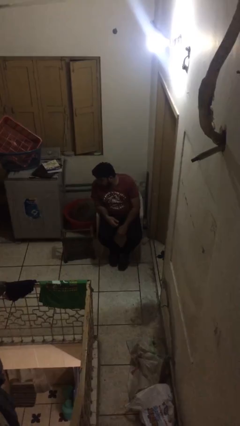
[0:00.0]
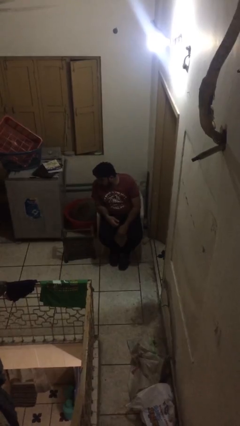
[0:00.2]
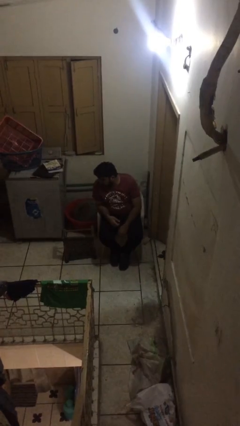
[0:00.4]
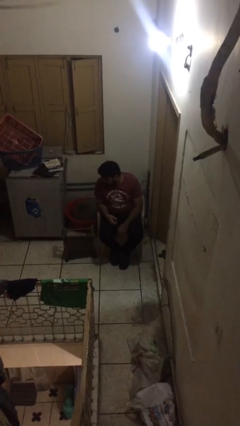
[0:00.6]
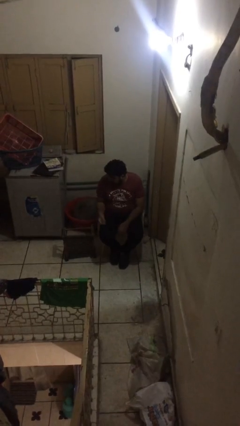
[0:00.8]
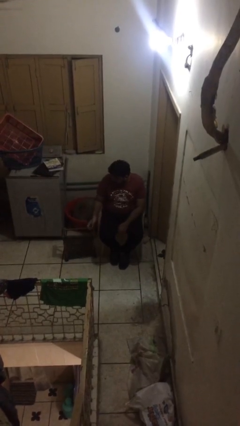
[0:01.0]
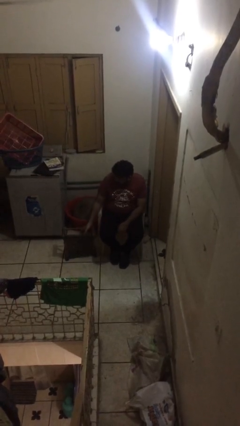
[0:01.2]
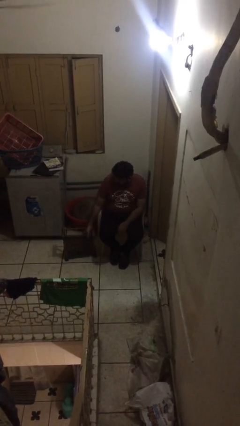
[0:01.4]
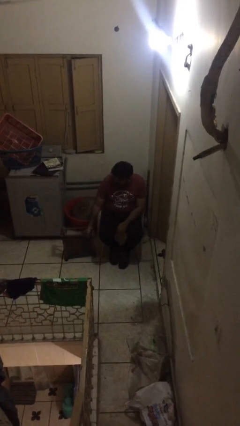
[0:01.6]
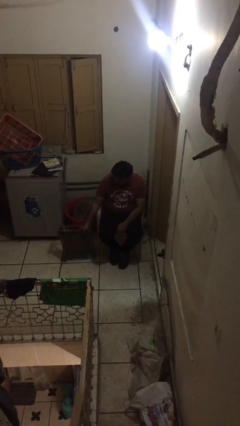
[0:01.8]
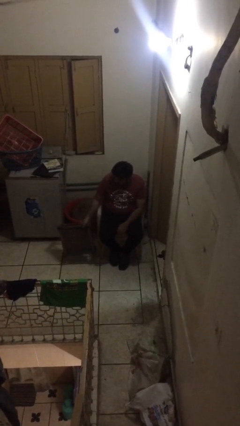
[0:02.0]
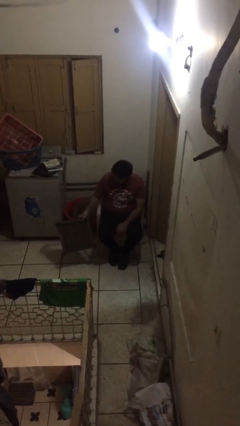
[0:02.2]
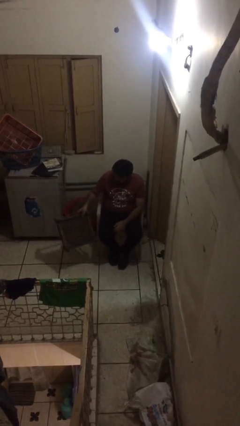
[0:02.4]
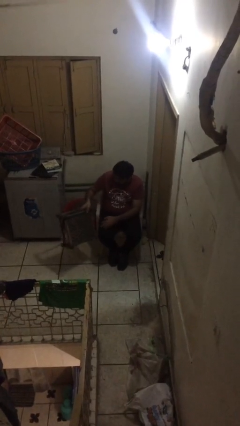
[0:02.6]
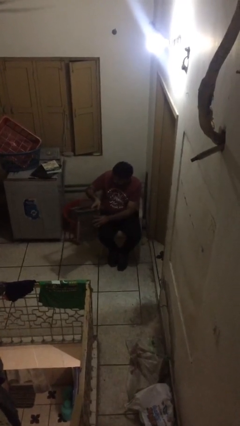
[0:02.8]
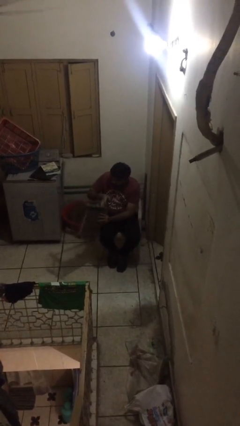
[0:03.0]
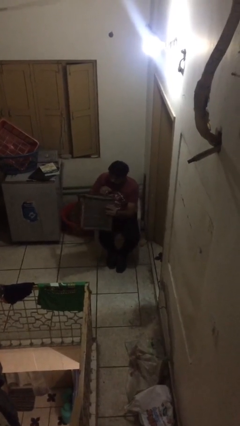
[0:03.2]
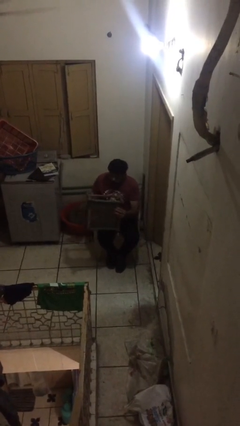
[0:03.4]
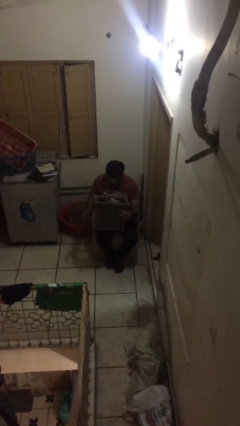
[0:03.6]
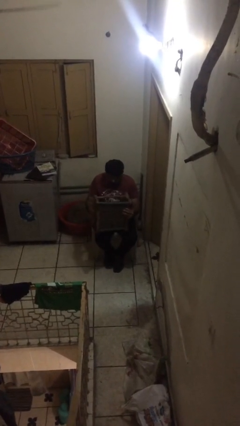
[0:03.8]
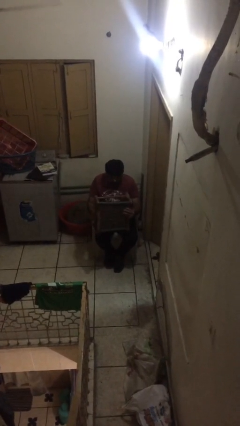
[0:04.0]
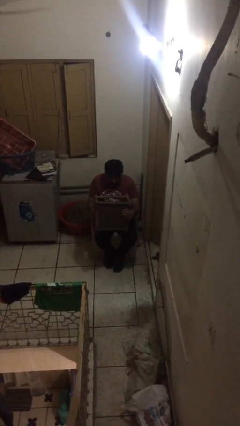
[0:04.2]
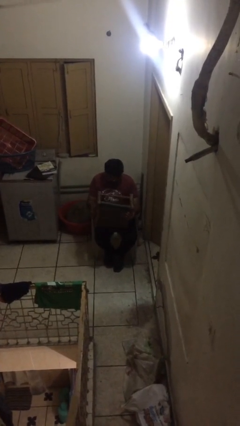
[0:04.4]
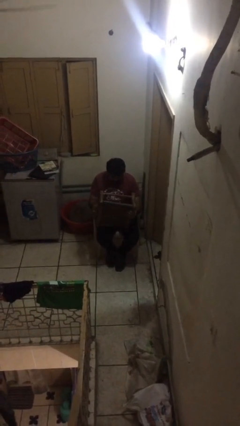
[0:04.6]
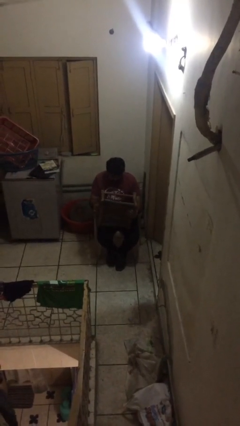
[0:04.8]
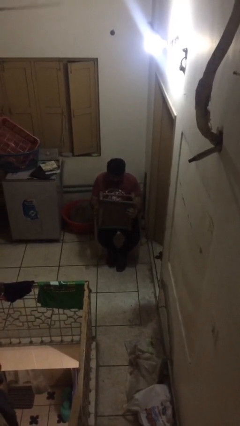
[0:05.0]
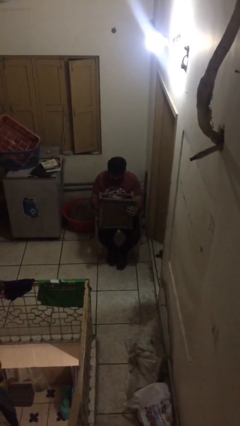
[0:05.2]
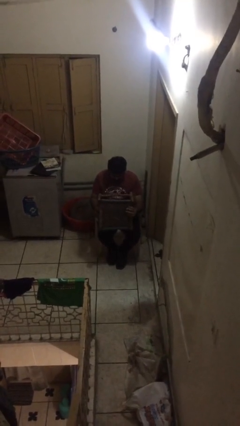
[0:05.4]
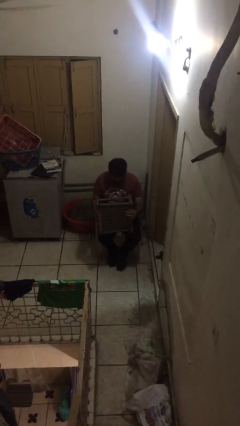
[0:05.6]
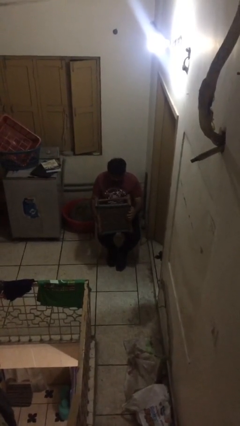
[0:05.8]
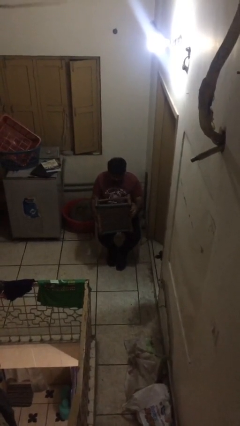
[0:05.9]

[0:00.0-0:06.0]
person picks up object from floor

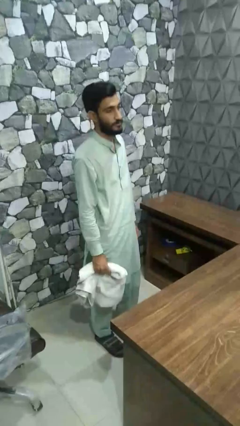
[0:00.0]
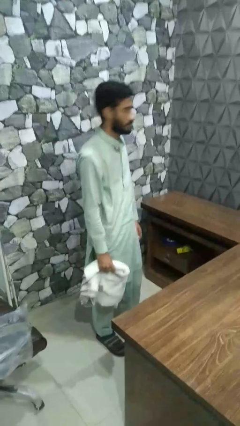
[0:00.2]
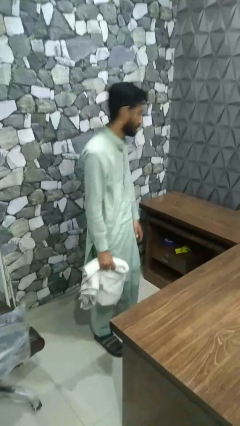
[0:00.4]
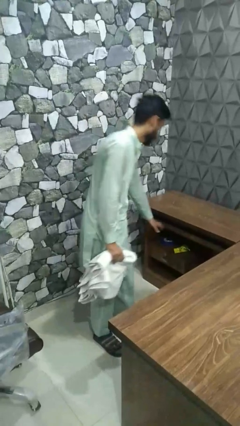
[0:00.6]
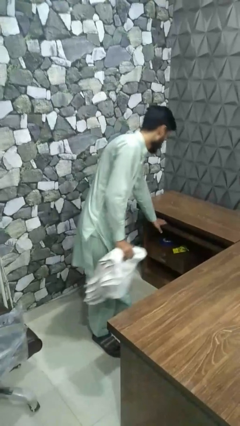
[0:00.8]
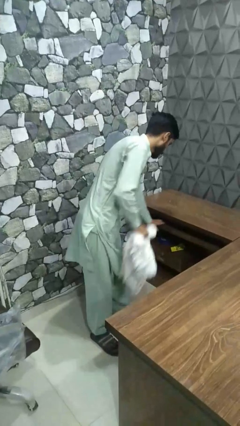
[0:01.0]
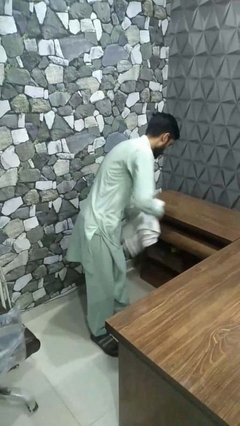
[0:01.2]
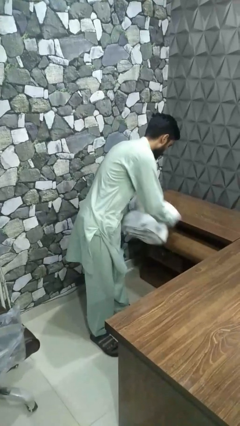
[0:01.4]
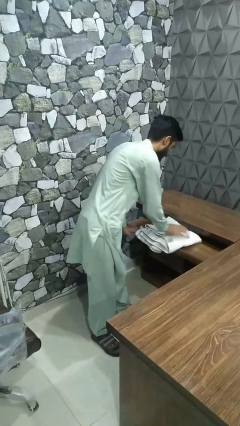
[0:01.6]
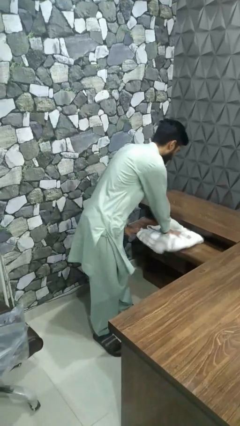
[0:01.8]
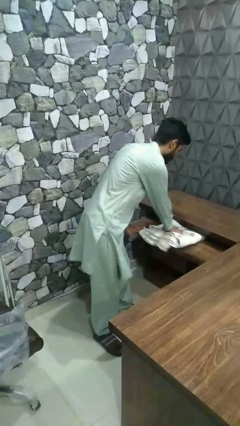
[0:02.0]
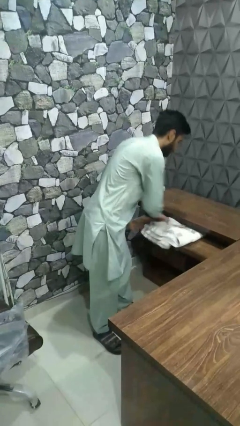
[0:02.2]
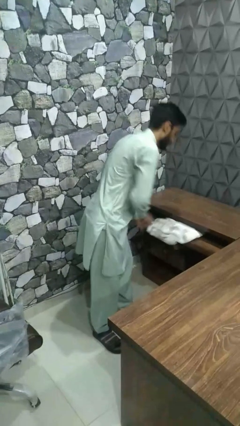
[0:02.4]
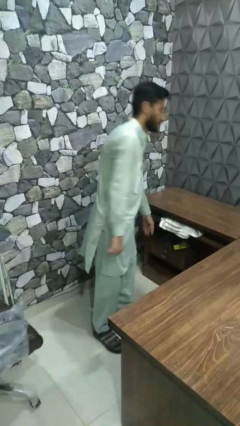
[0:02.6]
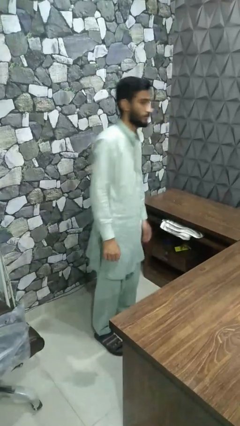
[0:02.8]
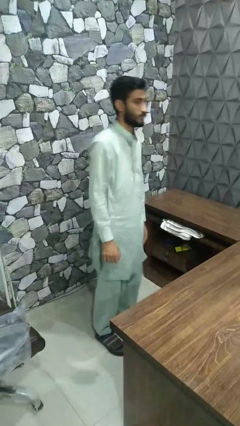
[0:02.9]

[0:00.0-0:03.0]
person puts clothes into dresser

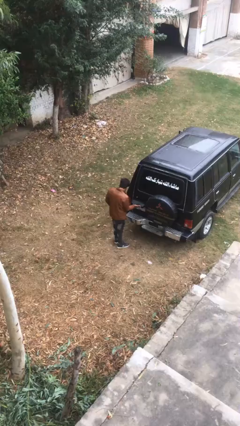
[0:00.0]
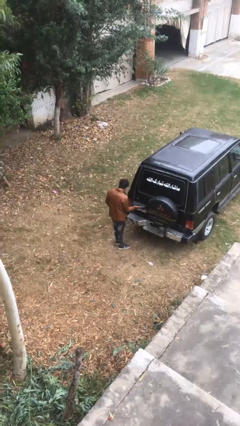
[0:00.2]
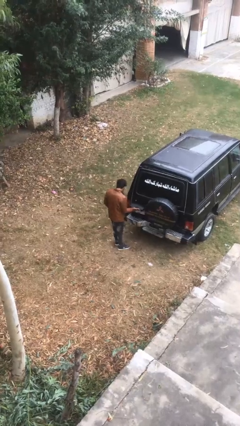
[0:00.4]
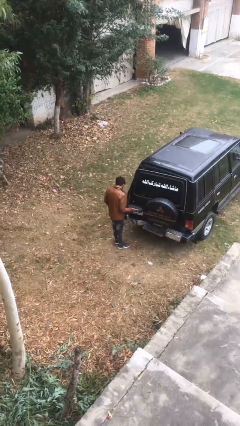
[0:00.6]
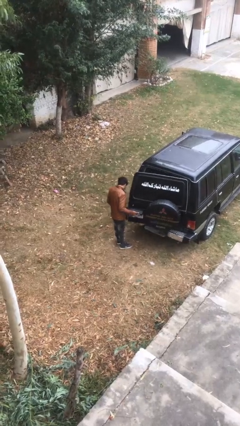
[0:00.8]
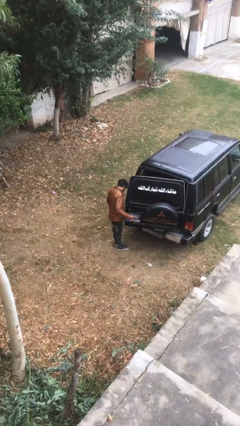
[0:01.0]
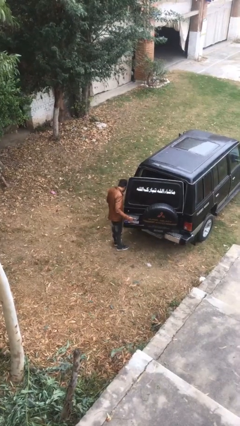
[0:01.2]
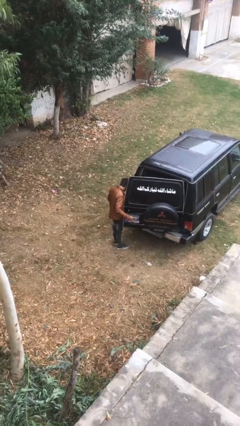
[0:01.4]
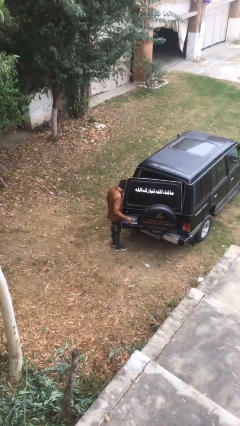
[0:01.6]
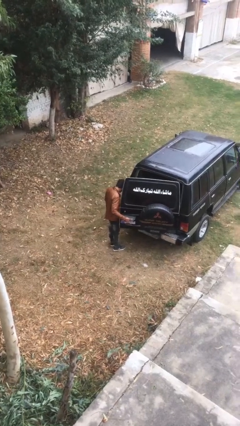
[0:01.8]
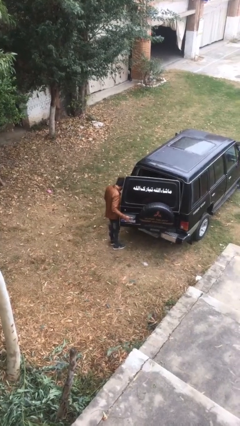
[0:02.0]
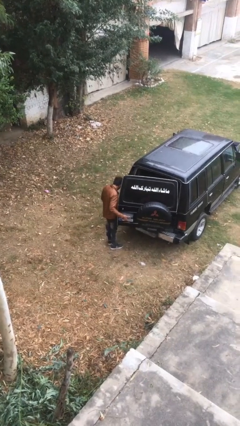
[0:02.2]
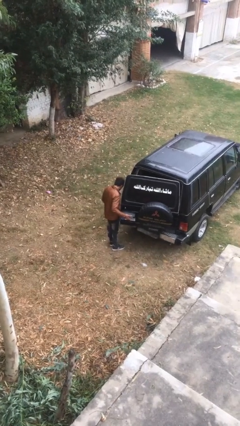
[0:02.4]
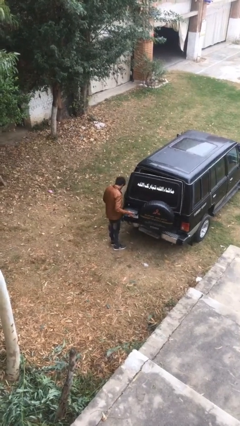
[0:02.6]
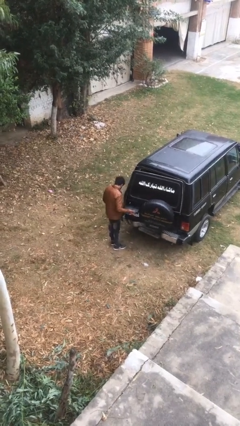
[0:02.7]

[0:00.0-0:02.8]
person opens car trunk

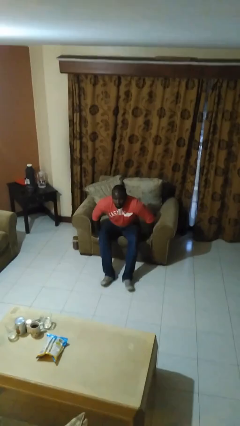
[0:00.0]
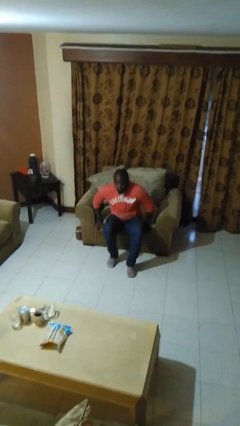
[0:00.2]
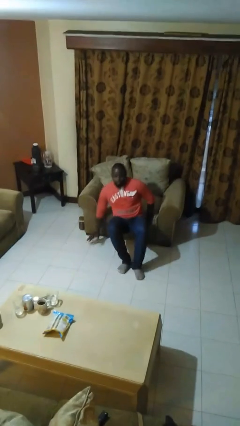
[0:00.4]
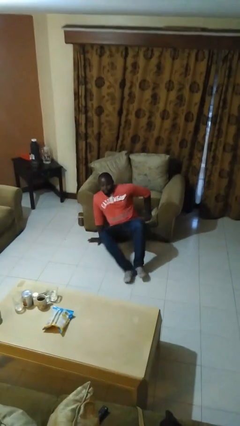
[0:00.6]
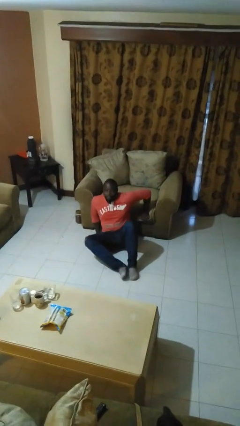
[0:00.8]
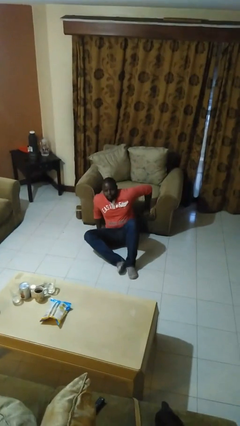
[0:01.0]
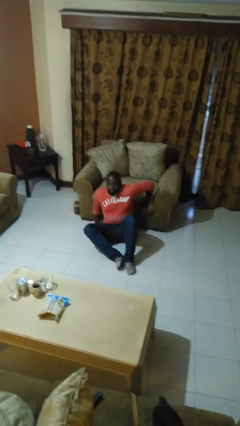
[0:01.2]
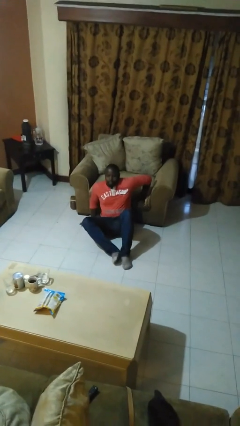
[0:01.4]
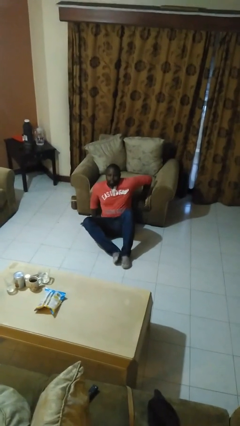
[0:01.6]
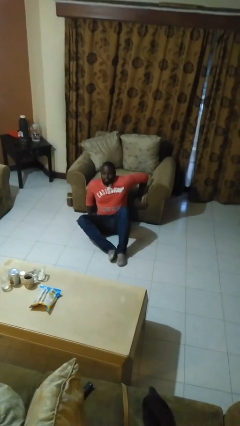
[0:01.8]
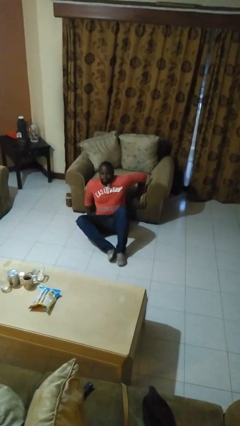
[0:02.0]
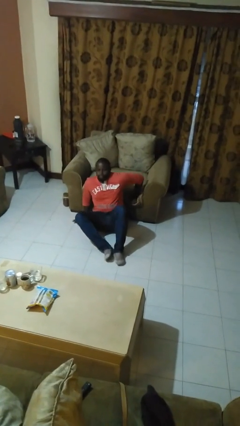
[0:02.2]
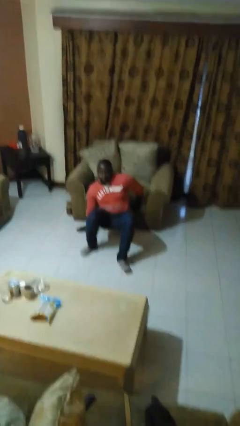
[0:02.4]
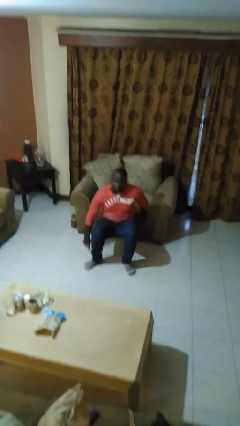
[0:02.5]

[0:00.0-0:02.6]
person falls from chair

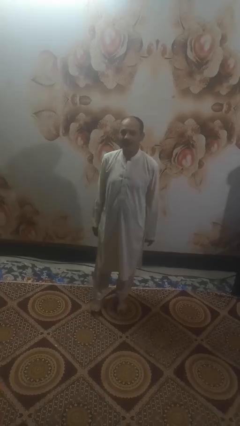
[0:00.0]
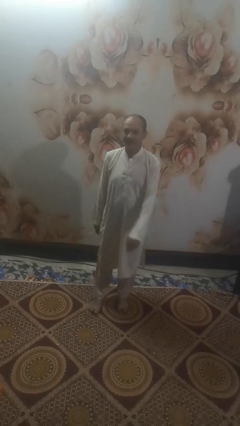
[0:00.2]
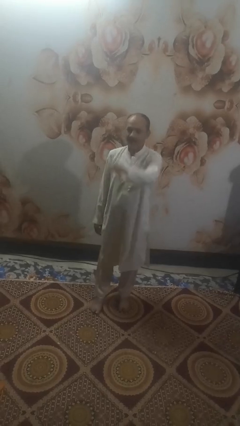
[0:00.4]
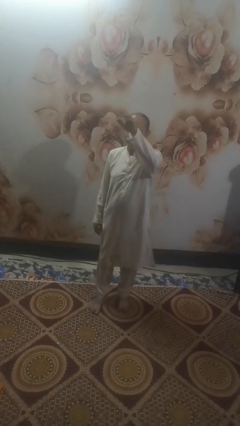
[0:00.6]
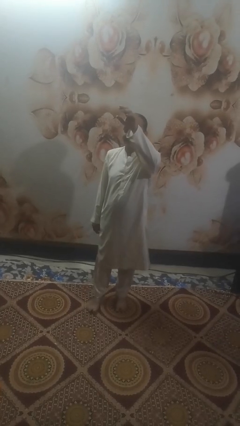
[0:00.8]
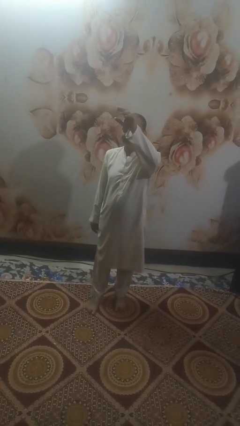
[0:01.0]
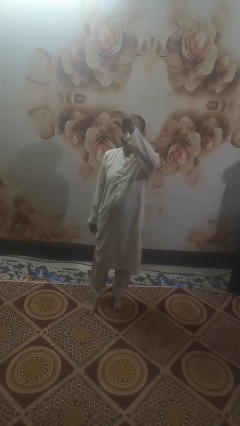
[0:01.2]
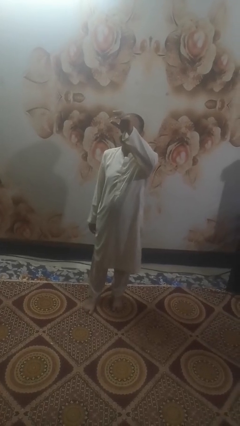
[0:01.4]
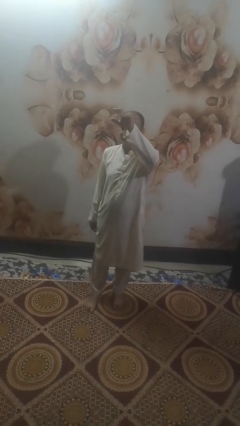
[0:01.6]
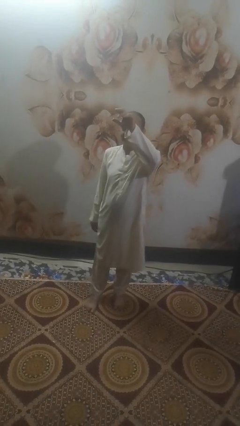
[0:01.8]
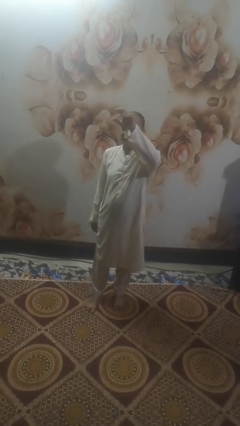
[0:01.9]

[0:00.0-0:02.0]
person gestures swipe up

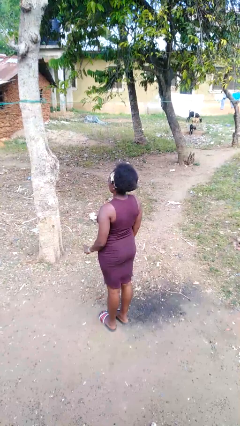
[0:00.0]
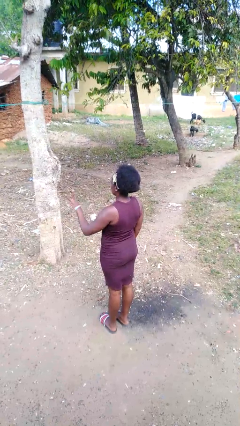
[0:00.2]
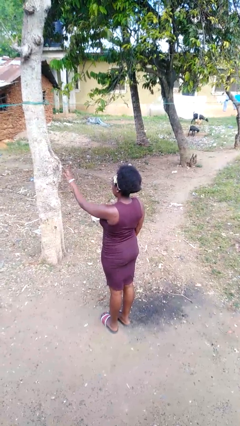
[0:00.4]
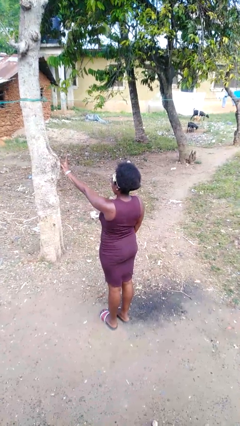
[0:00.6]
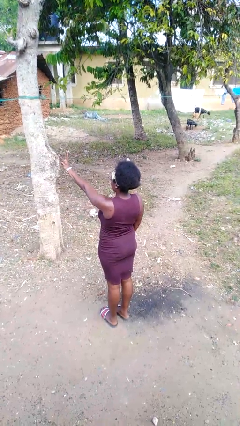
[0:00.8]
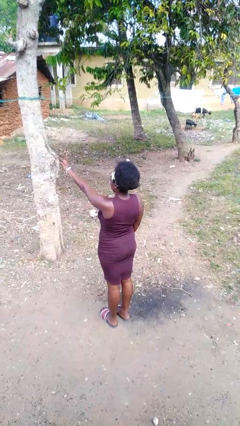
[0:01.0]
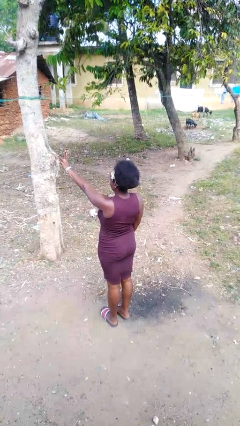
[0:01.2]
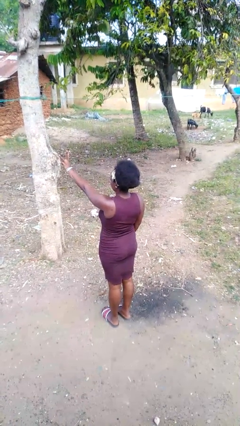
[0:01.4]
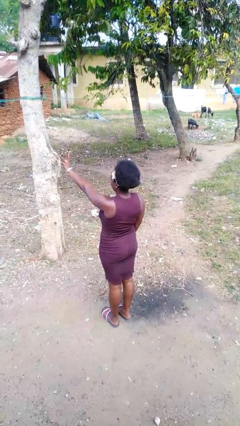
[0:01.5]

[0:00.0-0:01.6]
person gestures number three
